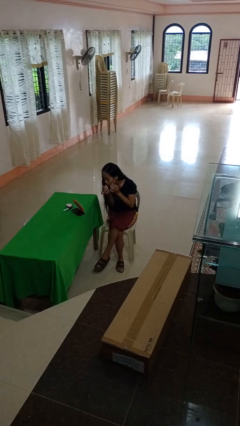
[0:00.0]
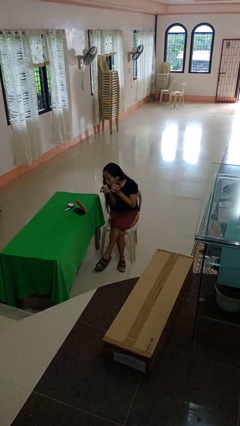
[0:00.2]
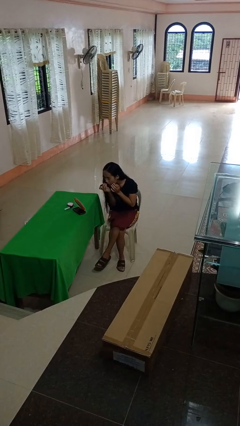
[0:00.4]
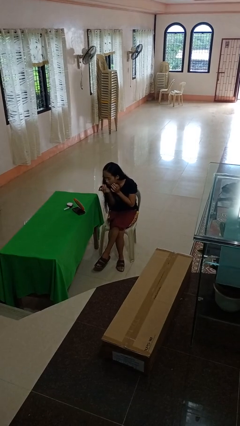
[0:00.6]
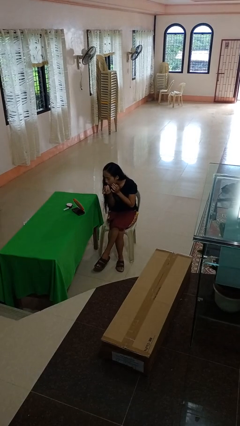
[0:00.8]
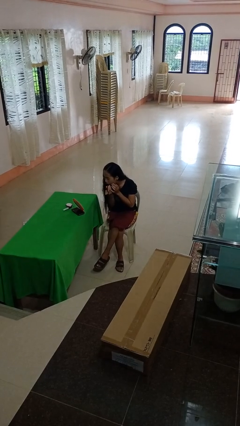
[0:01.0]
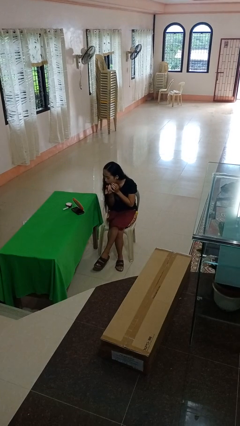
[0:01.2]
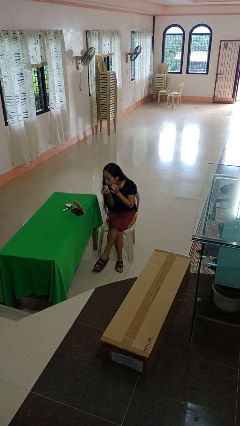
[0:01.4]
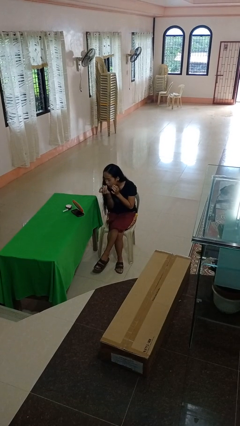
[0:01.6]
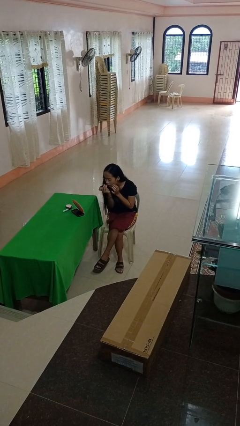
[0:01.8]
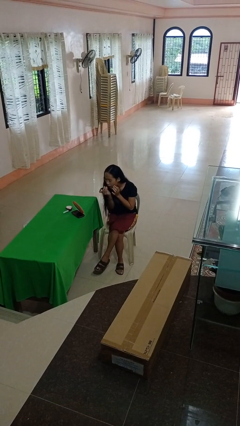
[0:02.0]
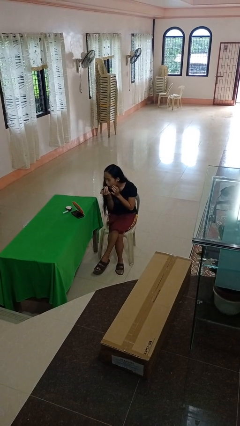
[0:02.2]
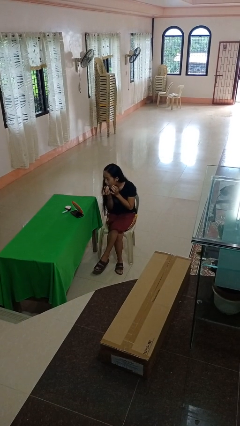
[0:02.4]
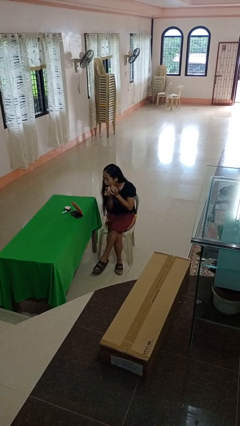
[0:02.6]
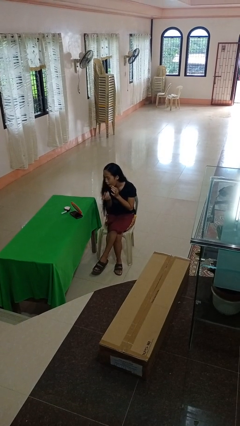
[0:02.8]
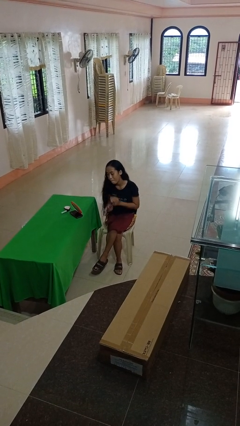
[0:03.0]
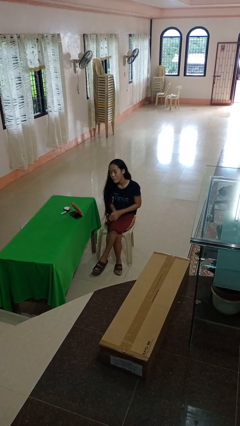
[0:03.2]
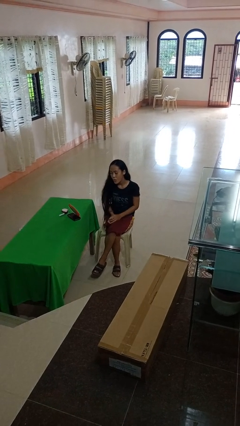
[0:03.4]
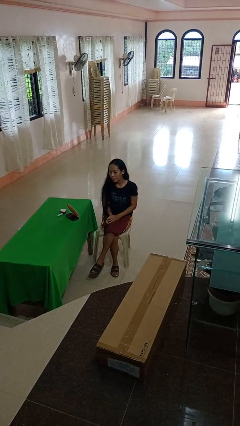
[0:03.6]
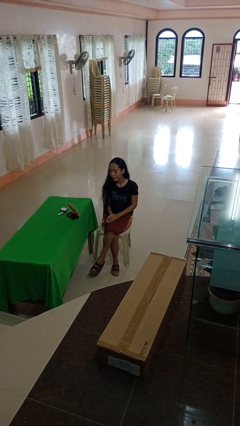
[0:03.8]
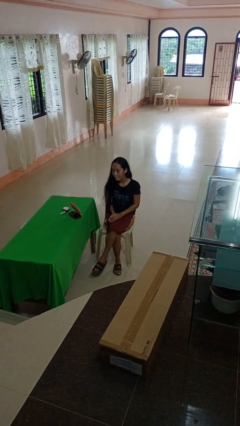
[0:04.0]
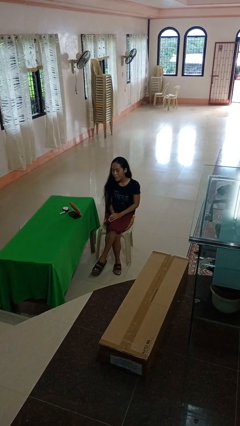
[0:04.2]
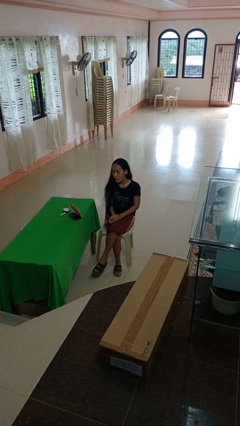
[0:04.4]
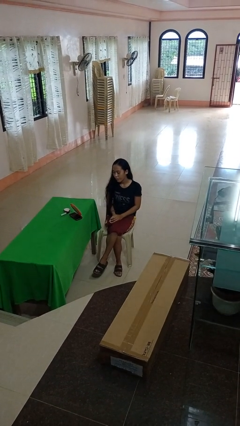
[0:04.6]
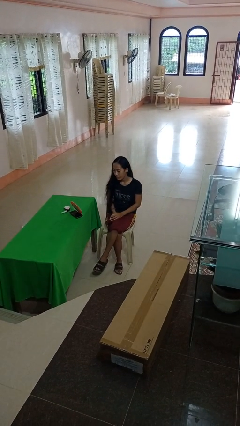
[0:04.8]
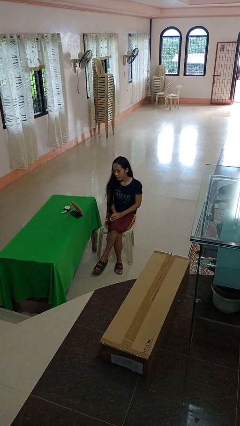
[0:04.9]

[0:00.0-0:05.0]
person applies lip makeup

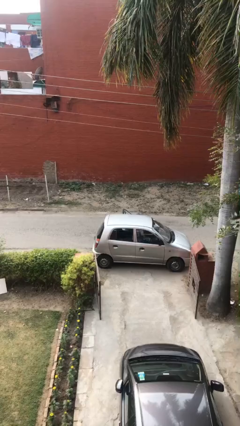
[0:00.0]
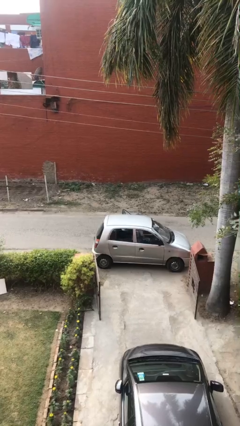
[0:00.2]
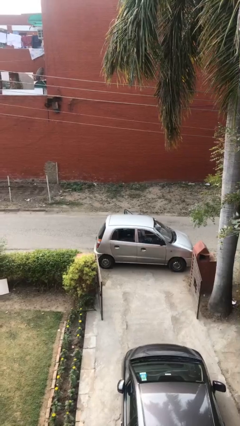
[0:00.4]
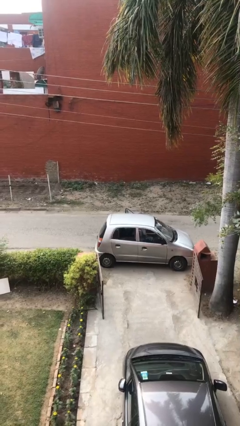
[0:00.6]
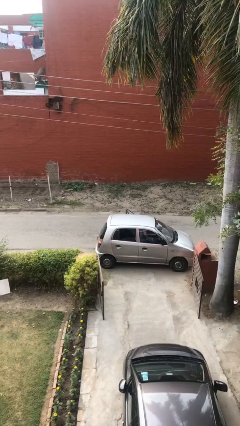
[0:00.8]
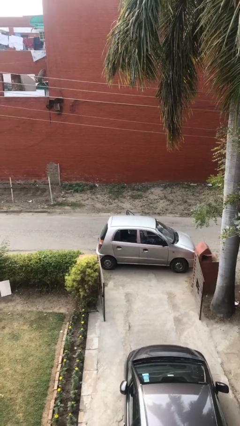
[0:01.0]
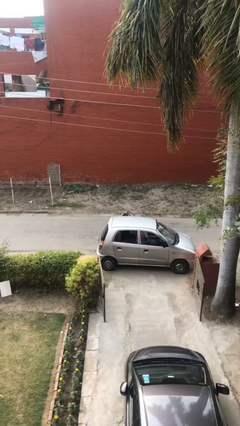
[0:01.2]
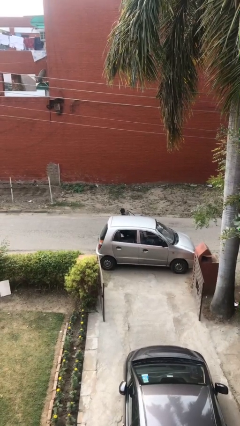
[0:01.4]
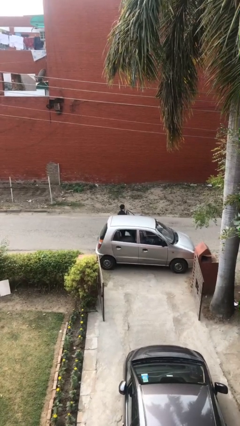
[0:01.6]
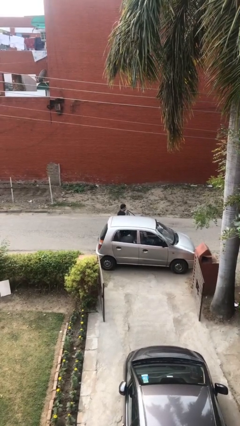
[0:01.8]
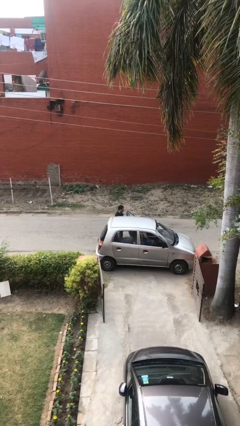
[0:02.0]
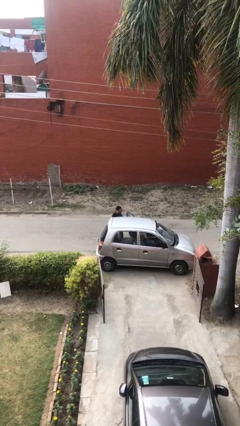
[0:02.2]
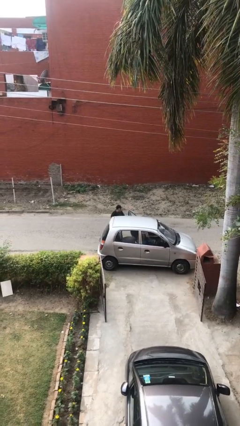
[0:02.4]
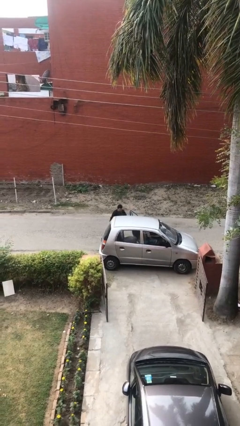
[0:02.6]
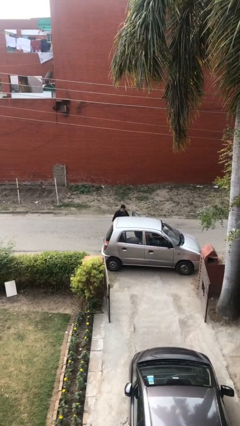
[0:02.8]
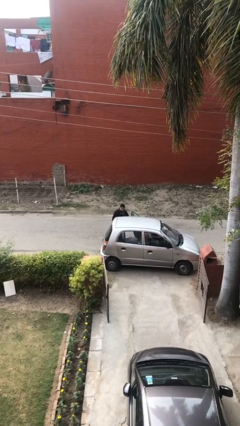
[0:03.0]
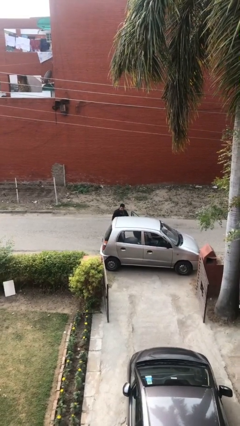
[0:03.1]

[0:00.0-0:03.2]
person exits car

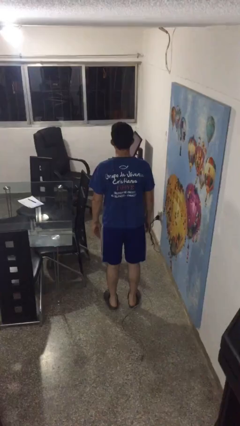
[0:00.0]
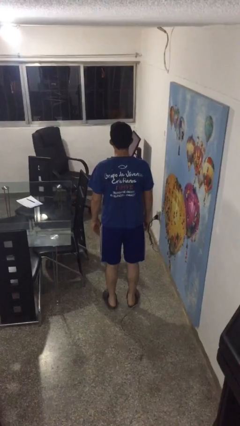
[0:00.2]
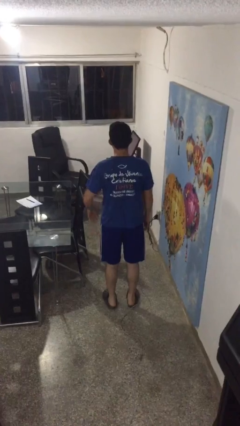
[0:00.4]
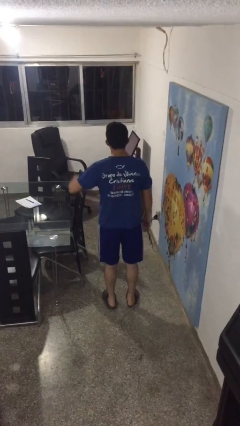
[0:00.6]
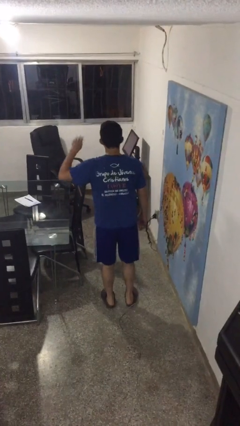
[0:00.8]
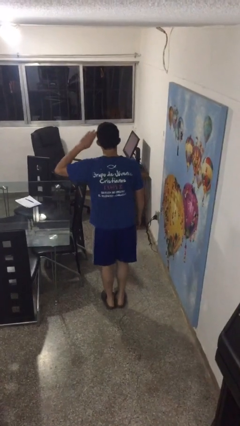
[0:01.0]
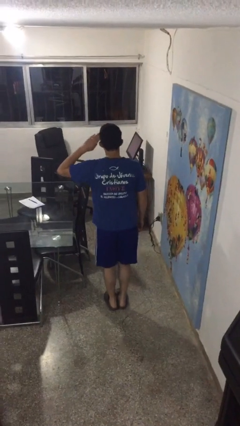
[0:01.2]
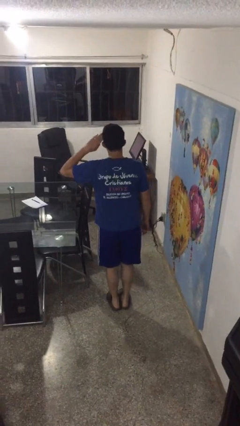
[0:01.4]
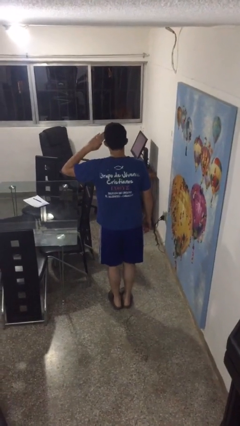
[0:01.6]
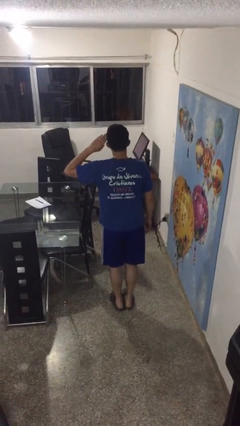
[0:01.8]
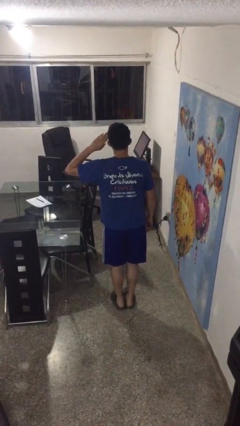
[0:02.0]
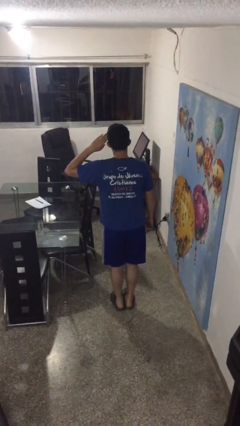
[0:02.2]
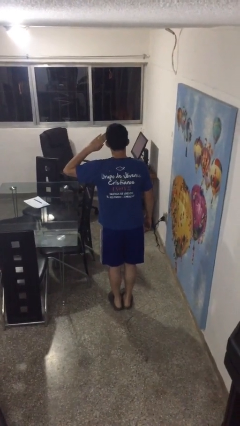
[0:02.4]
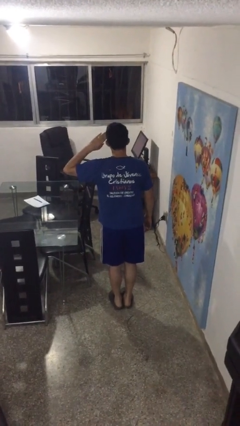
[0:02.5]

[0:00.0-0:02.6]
person salutes

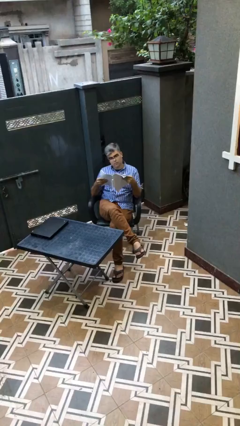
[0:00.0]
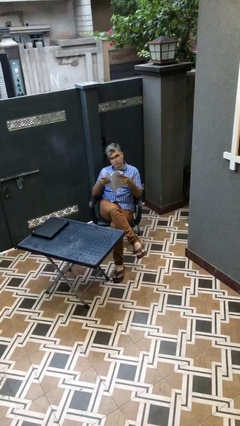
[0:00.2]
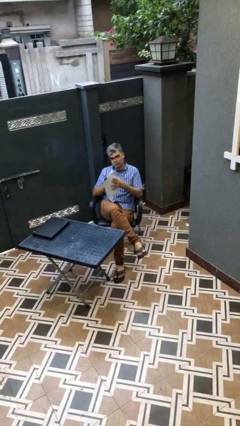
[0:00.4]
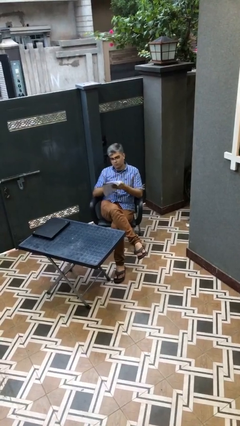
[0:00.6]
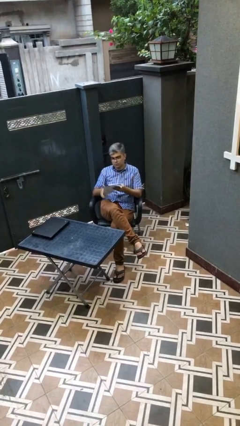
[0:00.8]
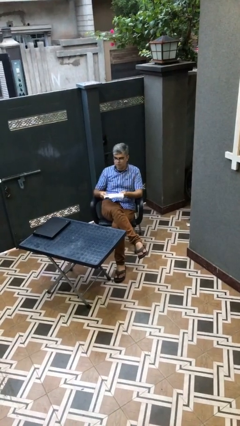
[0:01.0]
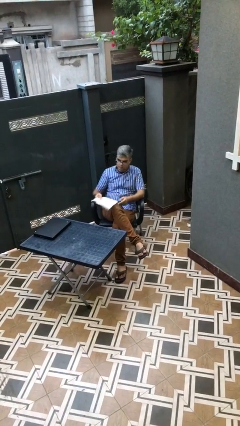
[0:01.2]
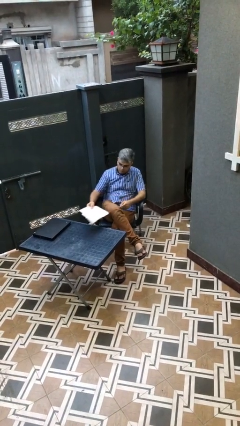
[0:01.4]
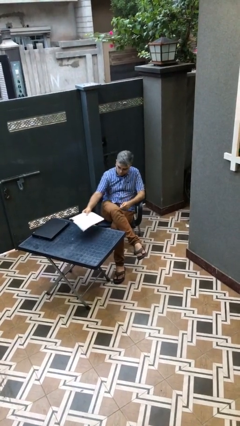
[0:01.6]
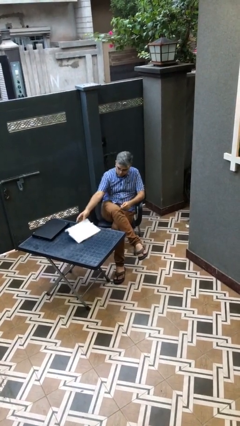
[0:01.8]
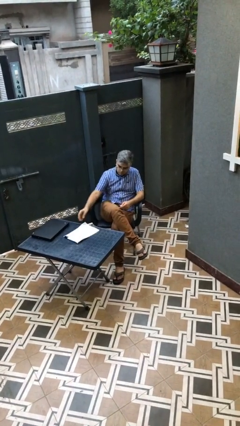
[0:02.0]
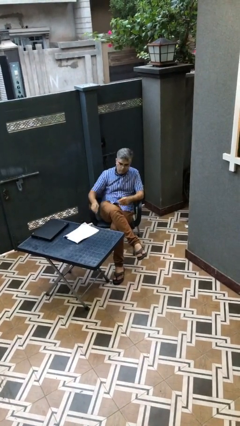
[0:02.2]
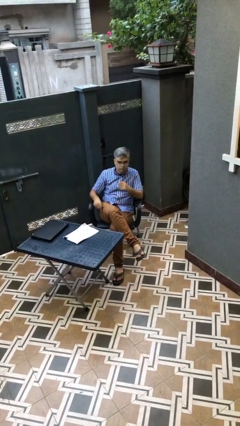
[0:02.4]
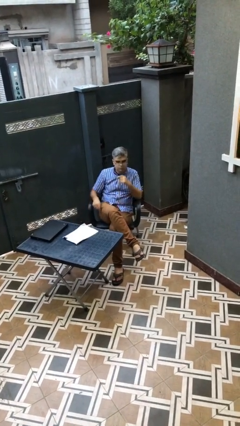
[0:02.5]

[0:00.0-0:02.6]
person puts down object on table

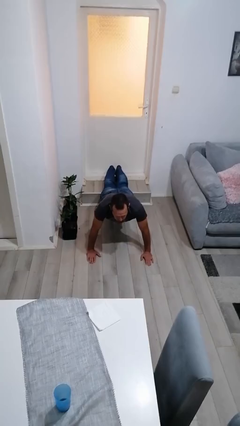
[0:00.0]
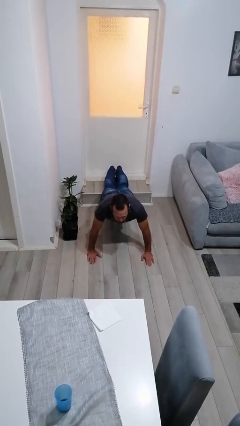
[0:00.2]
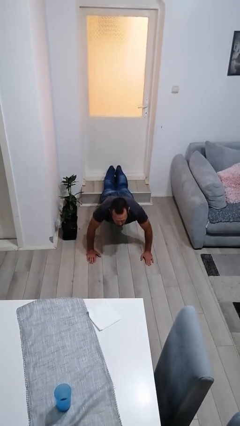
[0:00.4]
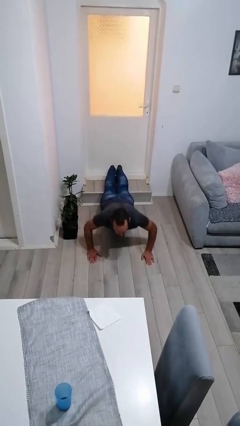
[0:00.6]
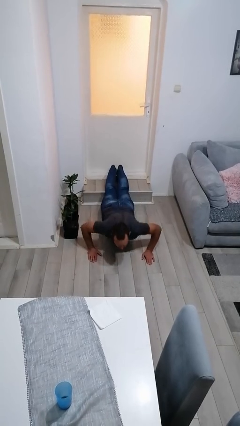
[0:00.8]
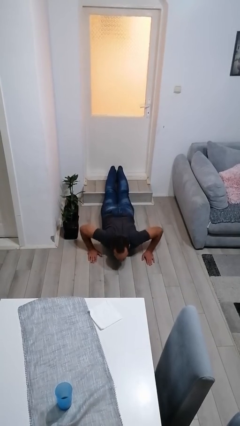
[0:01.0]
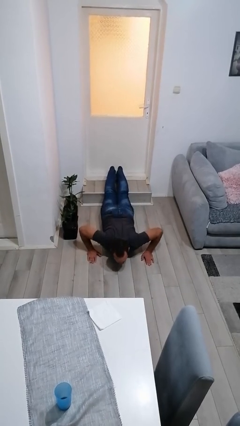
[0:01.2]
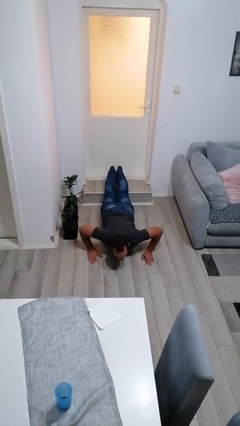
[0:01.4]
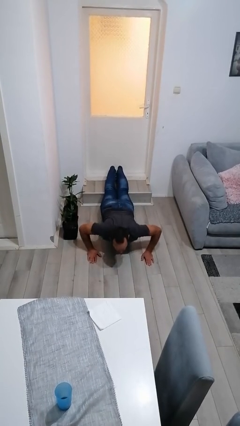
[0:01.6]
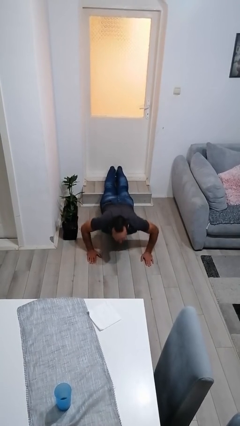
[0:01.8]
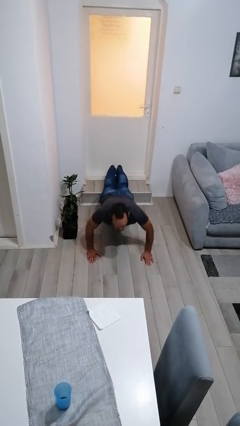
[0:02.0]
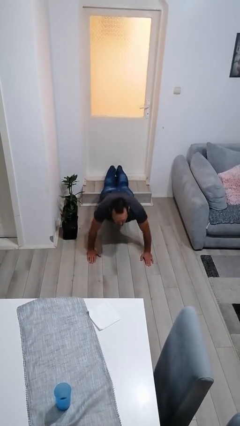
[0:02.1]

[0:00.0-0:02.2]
person exercises with pushup

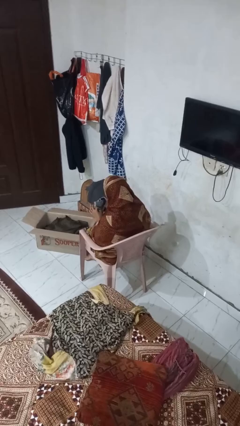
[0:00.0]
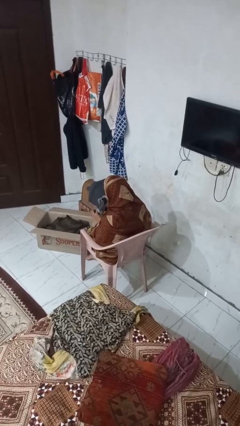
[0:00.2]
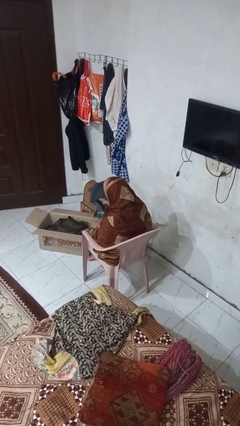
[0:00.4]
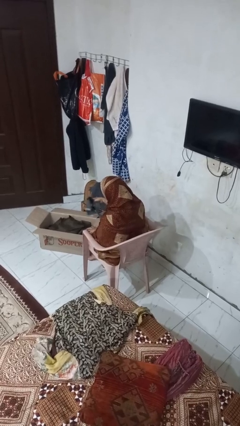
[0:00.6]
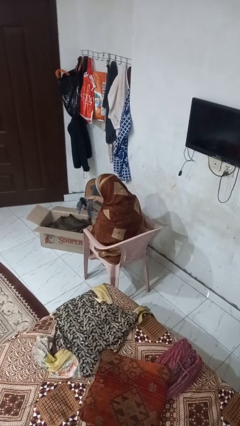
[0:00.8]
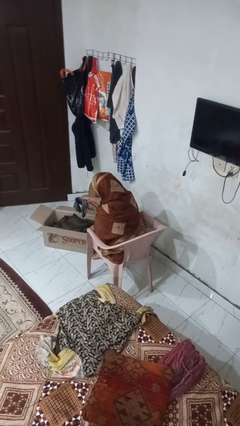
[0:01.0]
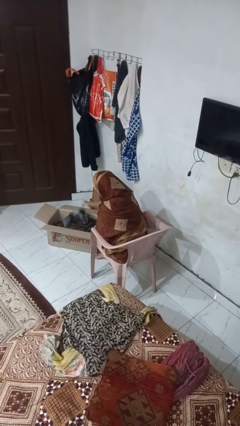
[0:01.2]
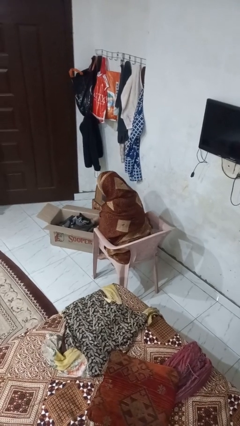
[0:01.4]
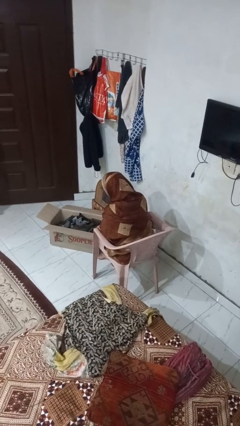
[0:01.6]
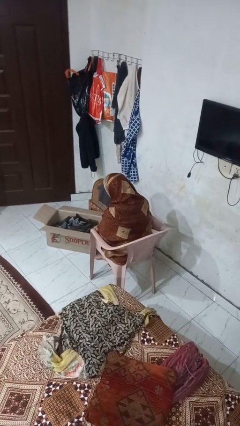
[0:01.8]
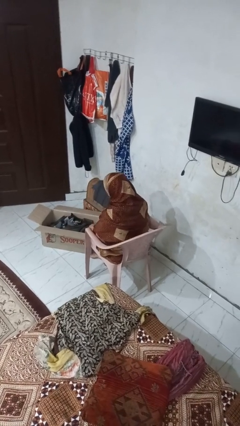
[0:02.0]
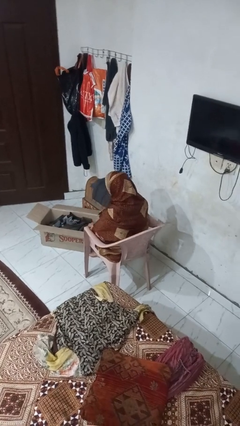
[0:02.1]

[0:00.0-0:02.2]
person puts object into box
